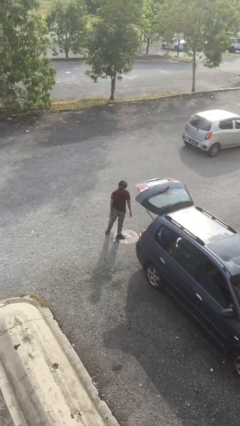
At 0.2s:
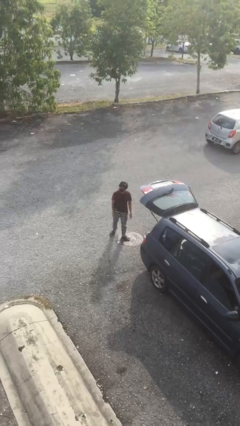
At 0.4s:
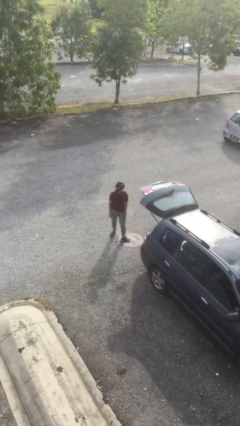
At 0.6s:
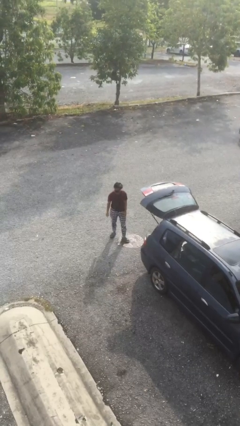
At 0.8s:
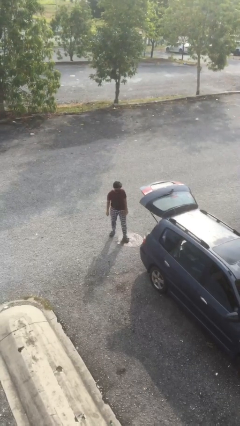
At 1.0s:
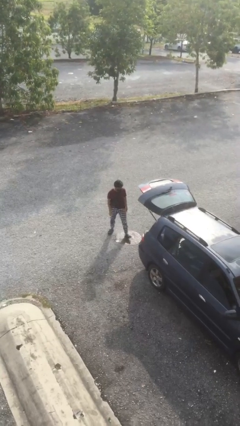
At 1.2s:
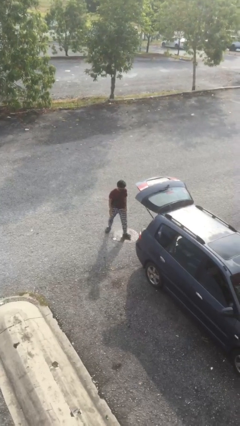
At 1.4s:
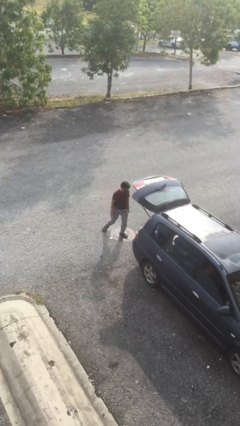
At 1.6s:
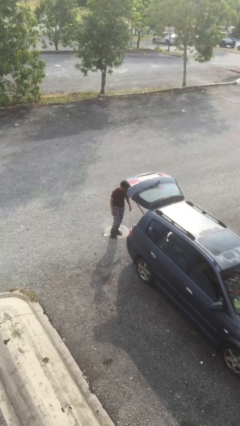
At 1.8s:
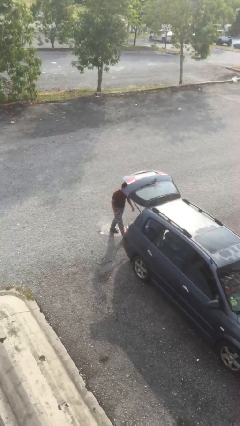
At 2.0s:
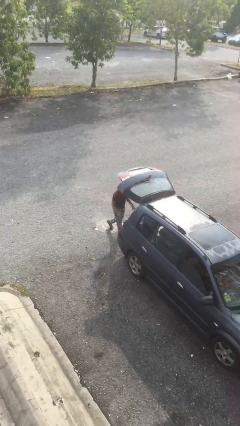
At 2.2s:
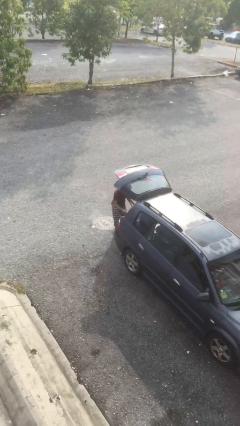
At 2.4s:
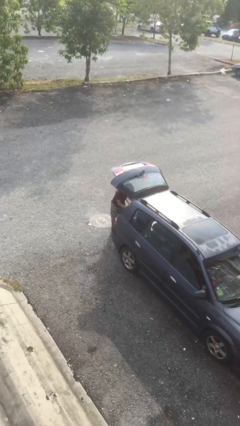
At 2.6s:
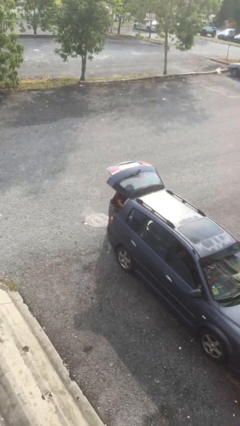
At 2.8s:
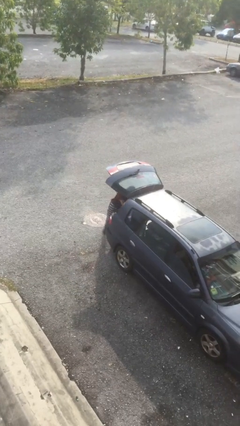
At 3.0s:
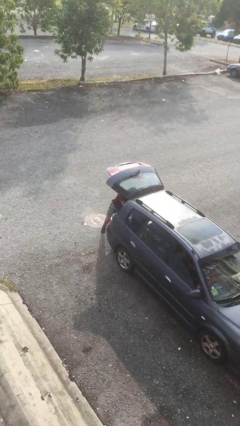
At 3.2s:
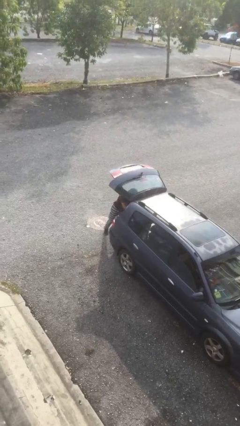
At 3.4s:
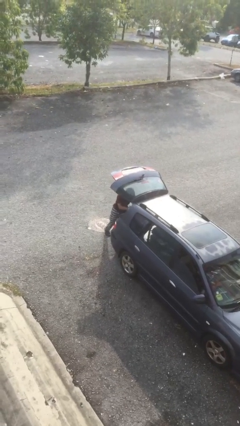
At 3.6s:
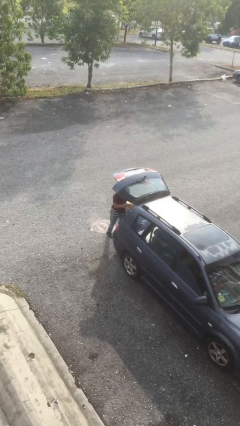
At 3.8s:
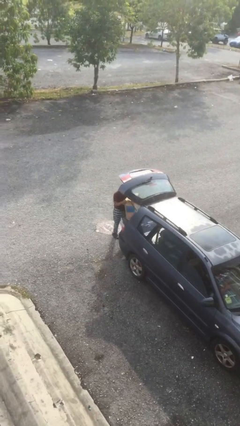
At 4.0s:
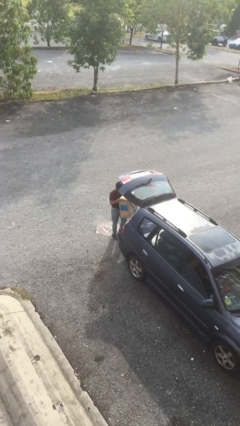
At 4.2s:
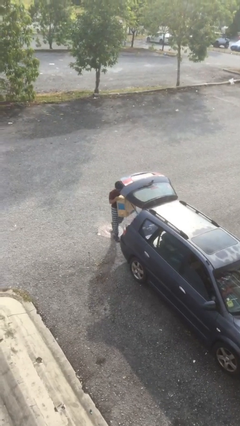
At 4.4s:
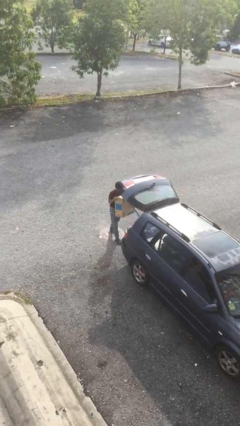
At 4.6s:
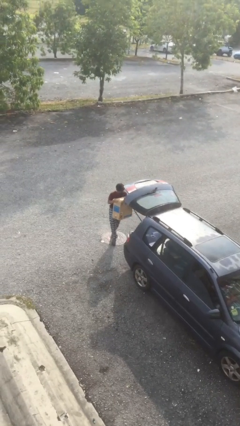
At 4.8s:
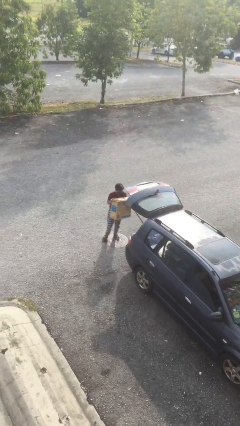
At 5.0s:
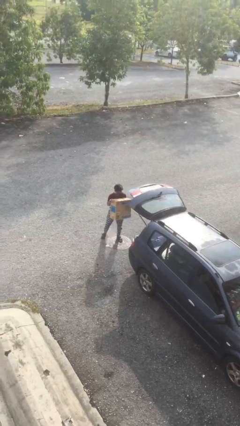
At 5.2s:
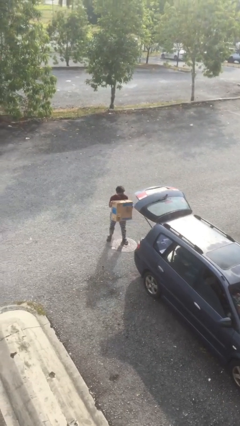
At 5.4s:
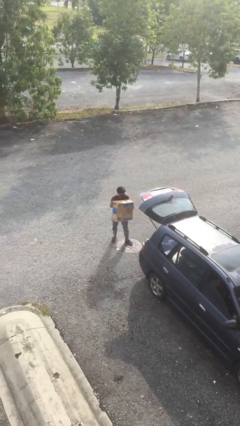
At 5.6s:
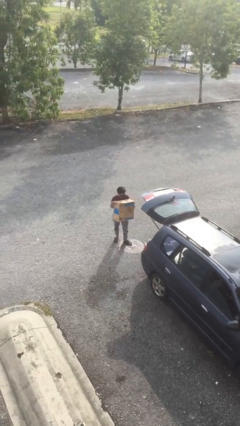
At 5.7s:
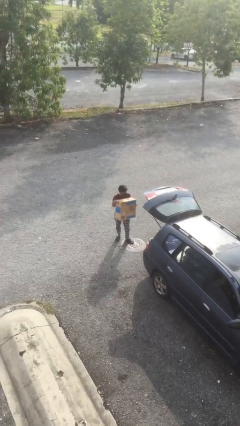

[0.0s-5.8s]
person unloads car

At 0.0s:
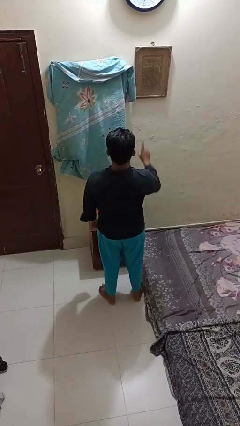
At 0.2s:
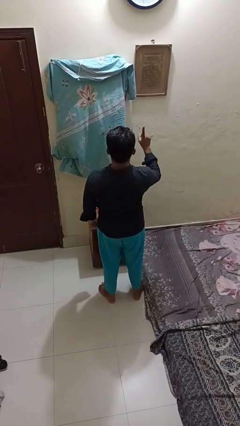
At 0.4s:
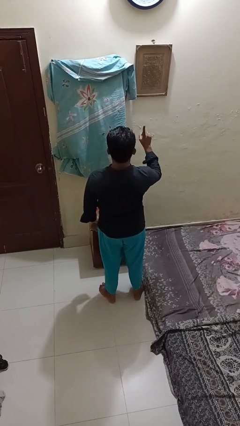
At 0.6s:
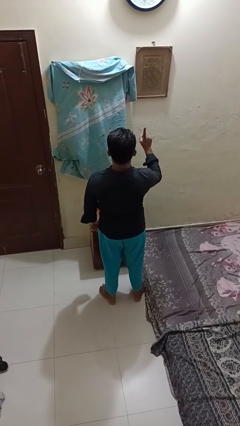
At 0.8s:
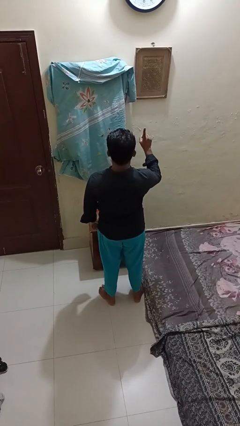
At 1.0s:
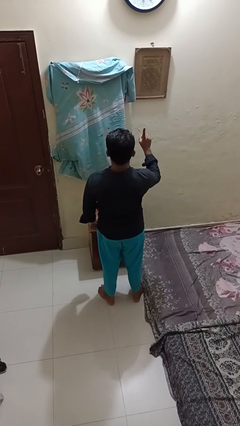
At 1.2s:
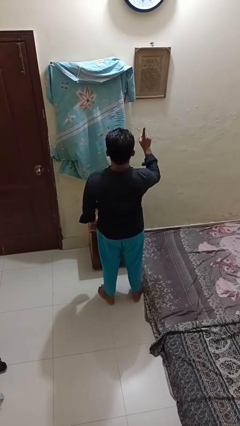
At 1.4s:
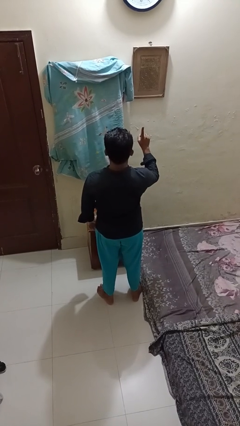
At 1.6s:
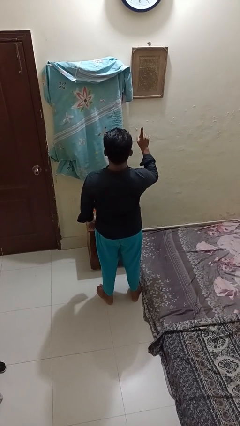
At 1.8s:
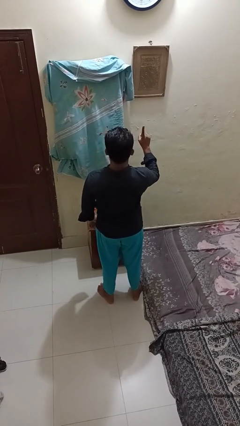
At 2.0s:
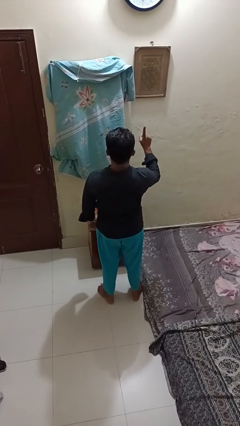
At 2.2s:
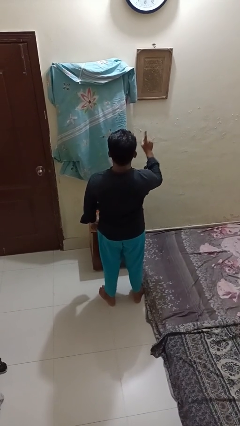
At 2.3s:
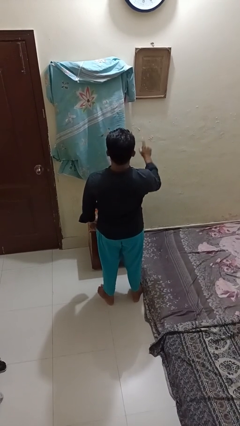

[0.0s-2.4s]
person gestures number one

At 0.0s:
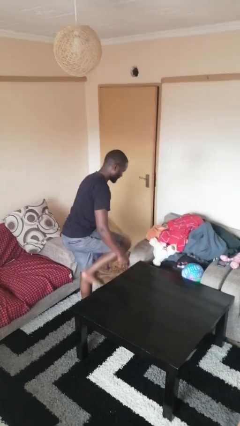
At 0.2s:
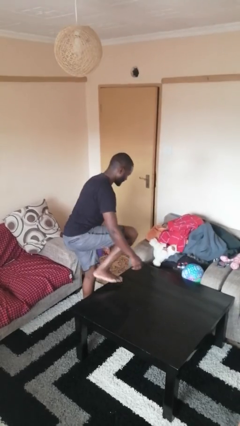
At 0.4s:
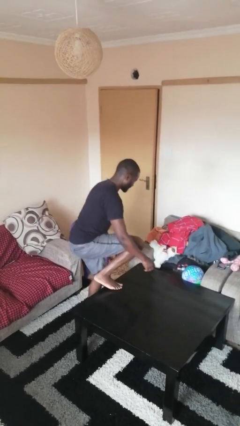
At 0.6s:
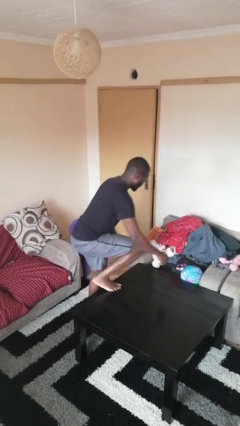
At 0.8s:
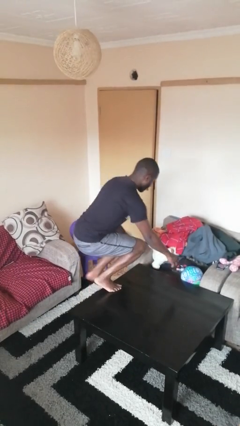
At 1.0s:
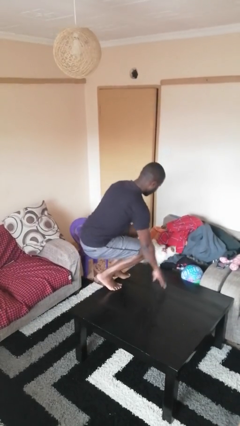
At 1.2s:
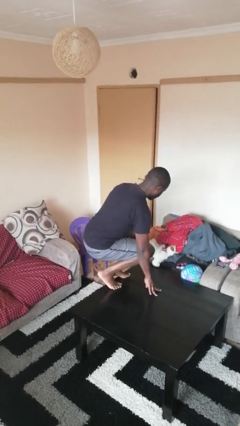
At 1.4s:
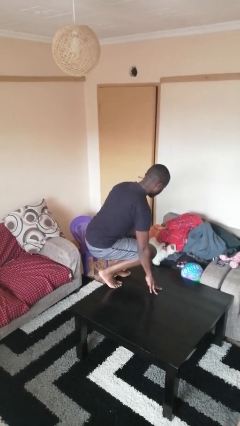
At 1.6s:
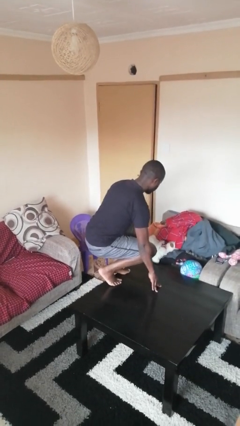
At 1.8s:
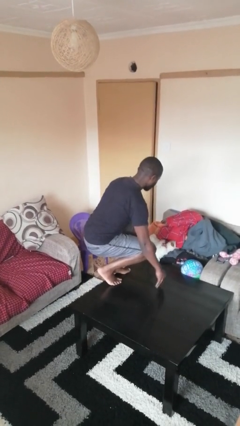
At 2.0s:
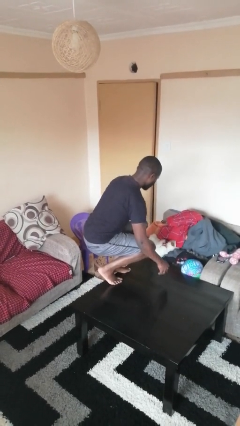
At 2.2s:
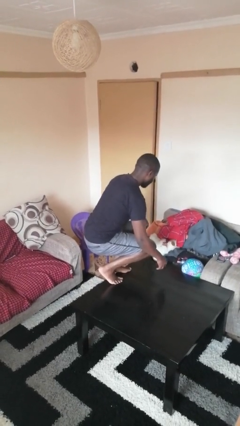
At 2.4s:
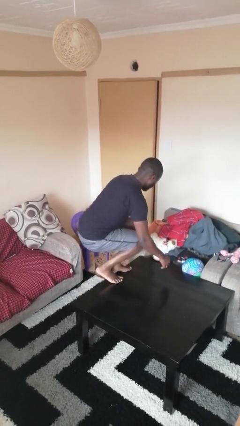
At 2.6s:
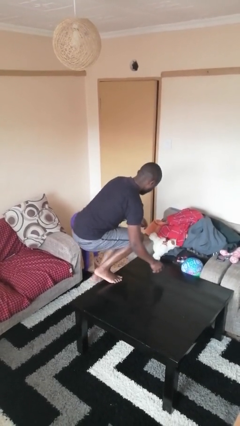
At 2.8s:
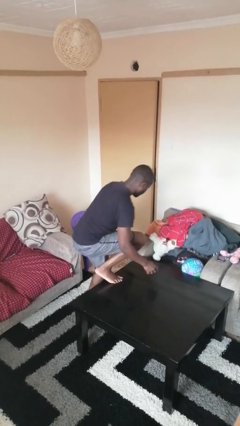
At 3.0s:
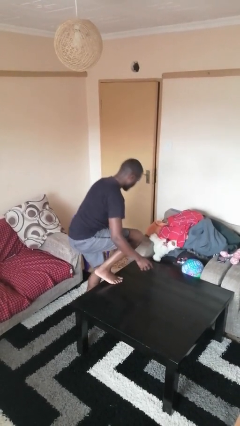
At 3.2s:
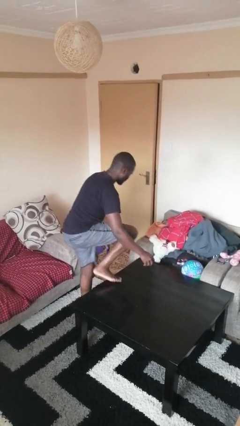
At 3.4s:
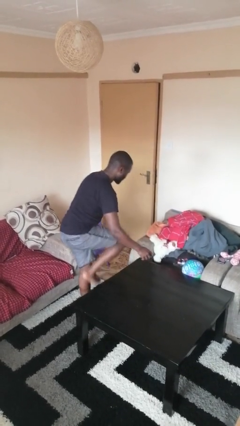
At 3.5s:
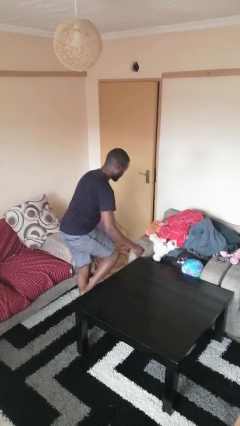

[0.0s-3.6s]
person climbs on table

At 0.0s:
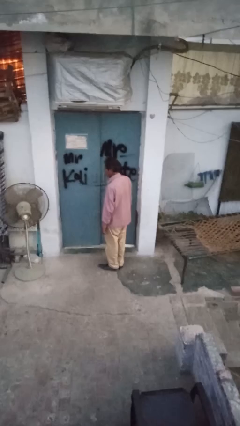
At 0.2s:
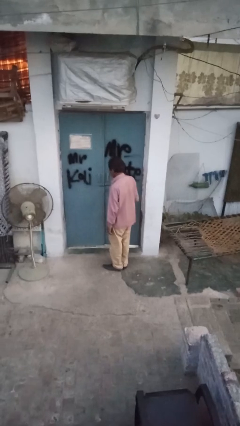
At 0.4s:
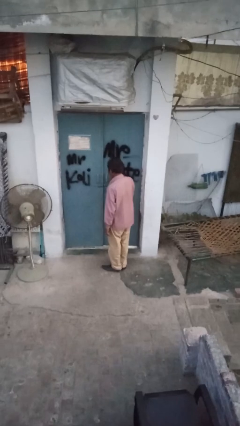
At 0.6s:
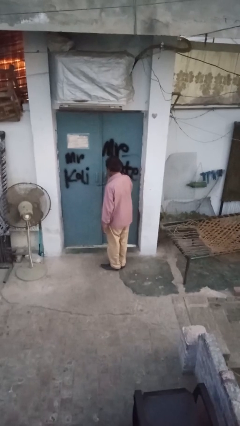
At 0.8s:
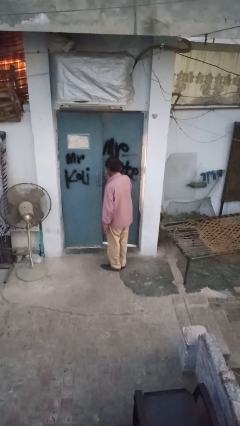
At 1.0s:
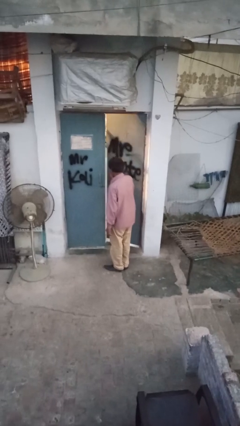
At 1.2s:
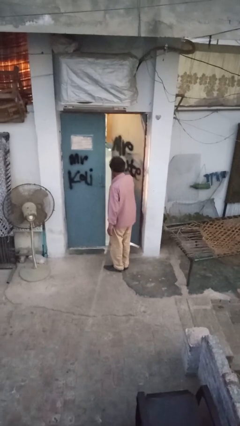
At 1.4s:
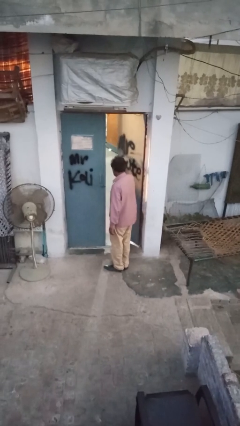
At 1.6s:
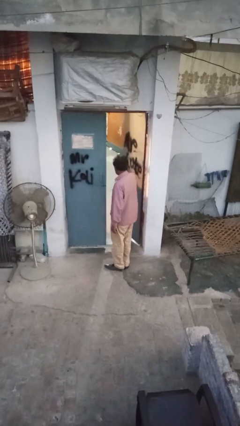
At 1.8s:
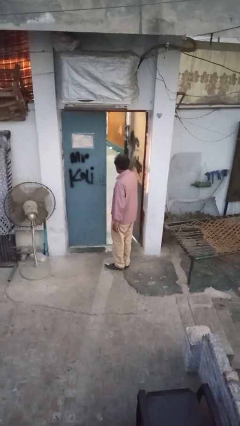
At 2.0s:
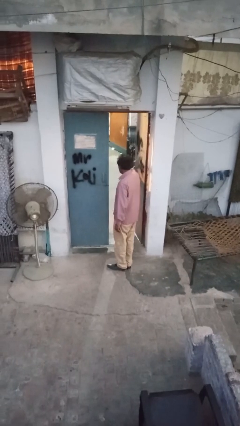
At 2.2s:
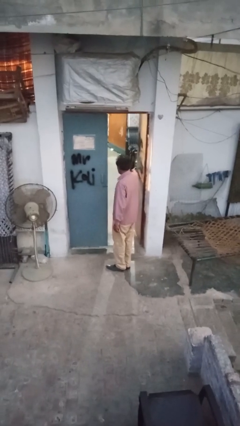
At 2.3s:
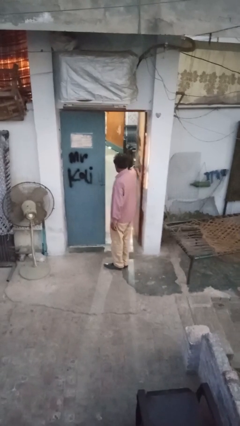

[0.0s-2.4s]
person opens facility door

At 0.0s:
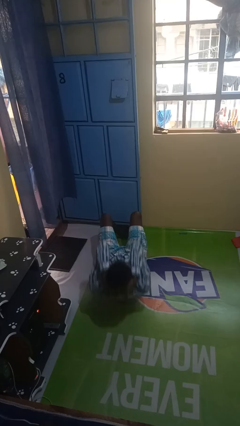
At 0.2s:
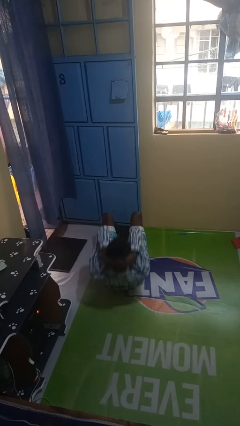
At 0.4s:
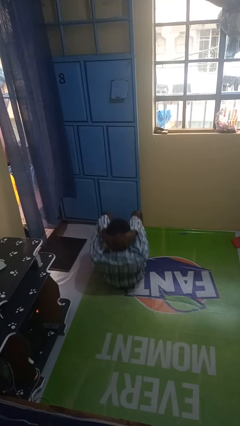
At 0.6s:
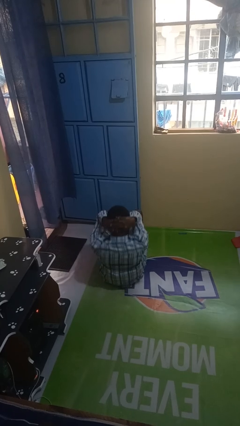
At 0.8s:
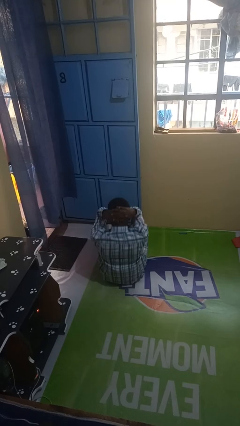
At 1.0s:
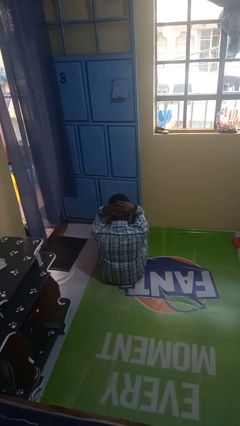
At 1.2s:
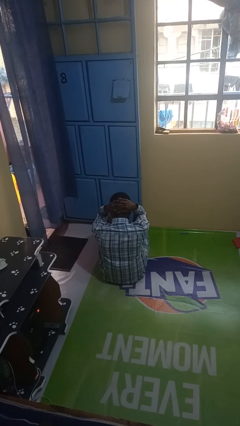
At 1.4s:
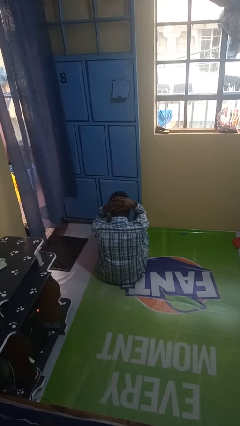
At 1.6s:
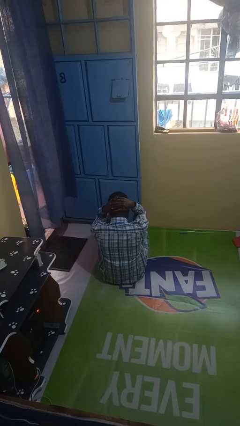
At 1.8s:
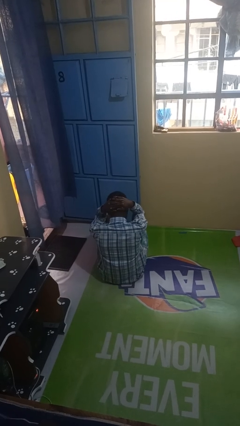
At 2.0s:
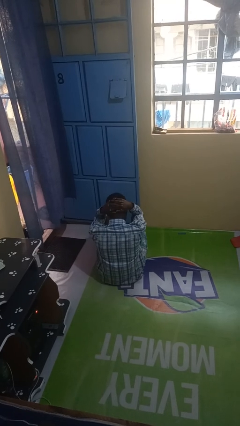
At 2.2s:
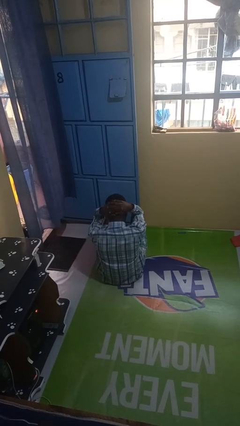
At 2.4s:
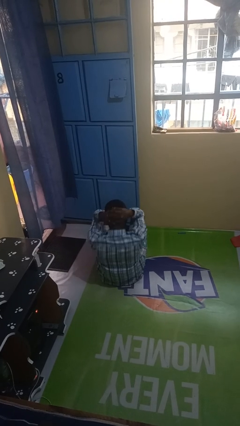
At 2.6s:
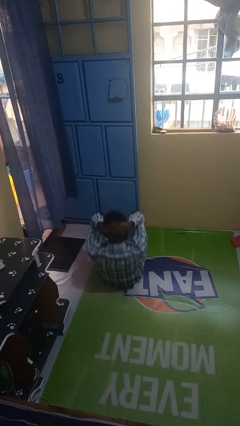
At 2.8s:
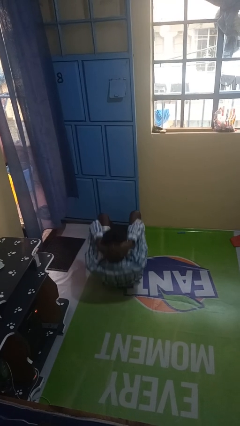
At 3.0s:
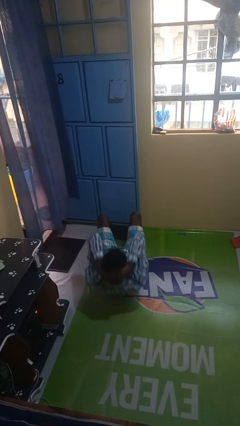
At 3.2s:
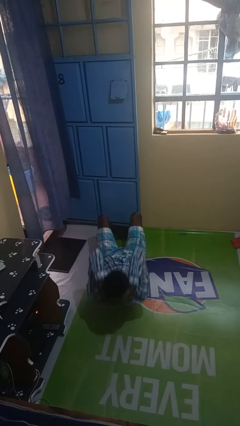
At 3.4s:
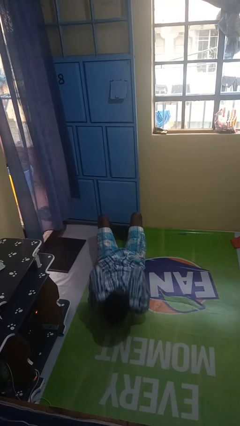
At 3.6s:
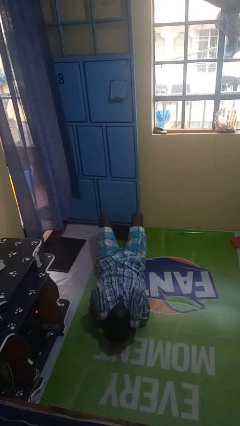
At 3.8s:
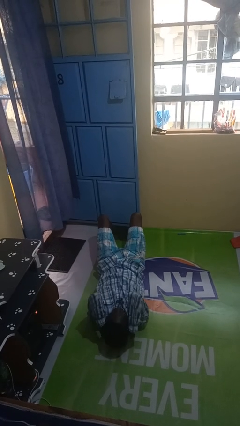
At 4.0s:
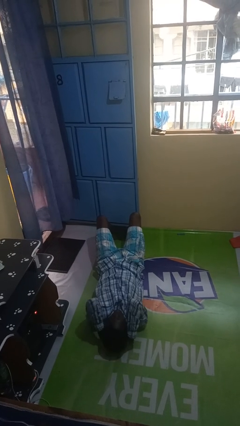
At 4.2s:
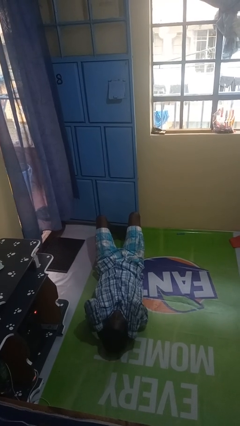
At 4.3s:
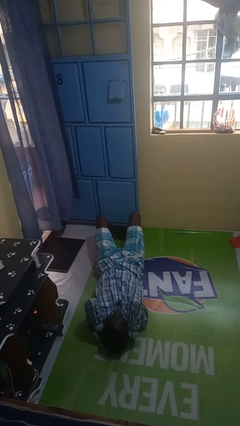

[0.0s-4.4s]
person exercises with situp
